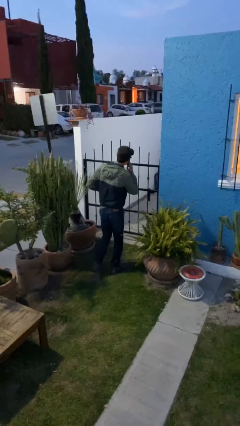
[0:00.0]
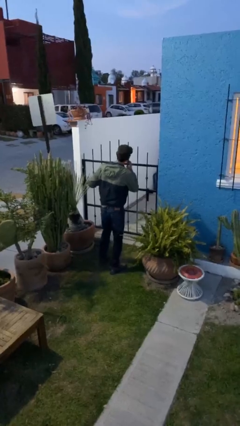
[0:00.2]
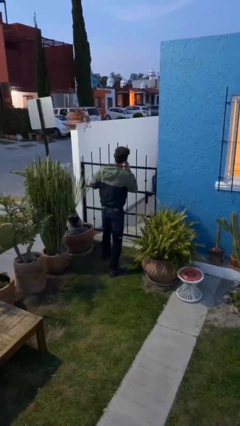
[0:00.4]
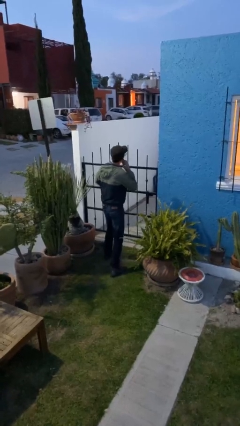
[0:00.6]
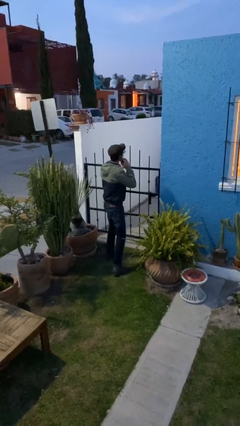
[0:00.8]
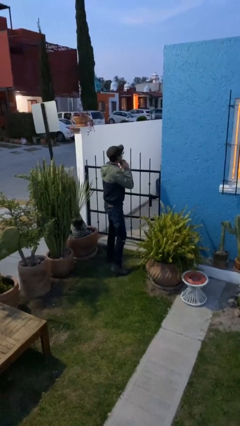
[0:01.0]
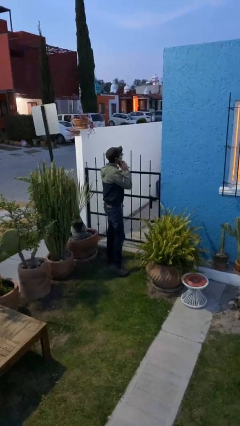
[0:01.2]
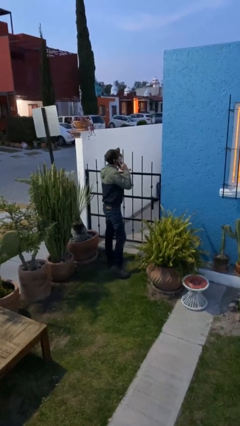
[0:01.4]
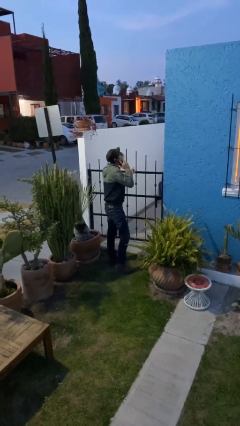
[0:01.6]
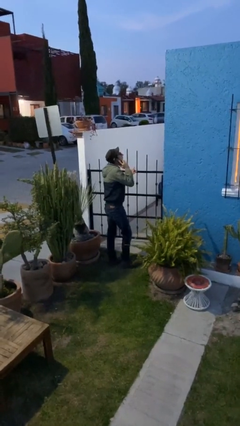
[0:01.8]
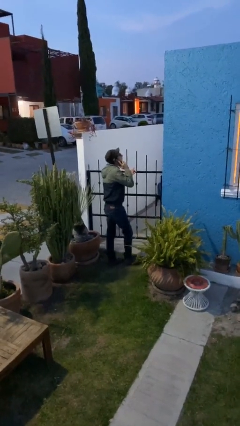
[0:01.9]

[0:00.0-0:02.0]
person opens facility door

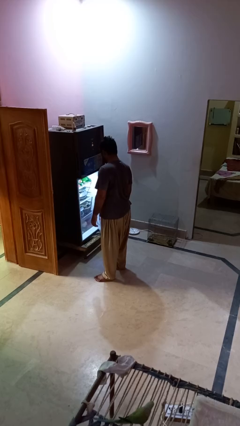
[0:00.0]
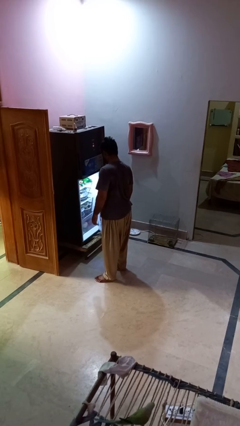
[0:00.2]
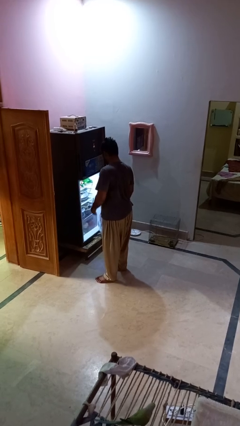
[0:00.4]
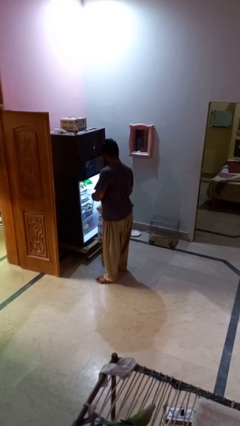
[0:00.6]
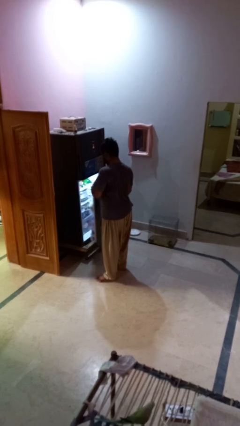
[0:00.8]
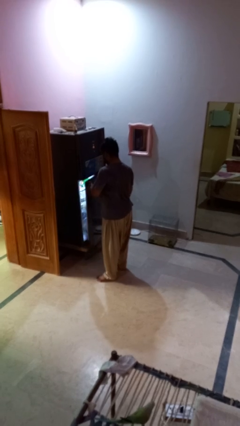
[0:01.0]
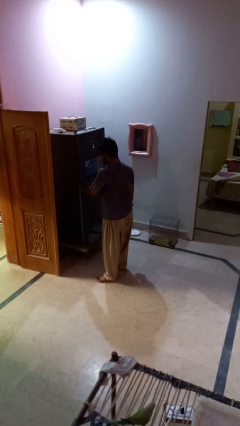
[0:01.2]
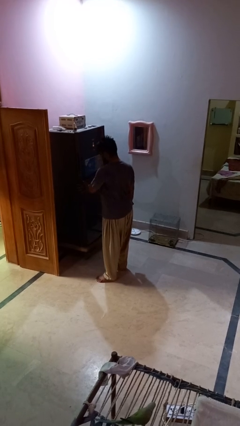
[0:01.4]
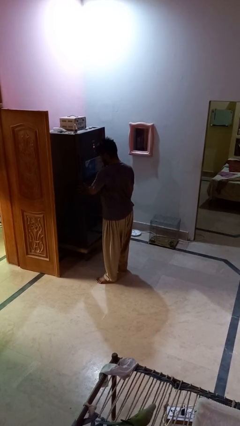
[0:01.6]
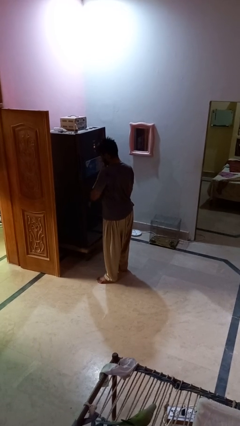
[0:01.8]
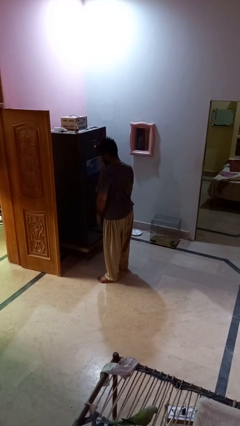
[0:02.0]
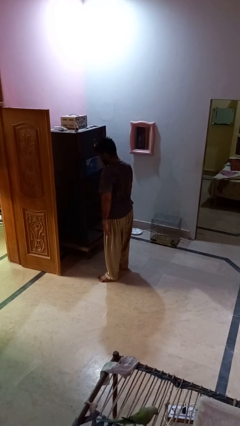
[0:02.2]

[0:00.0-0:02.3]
person closes refrigerator

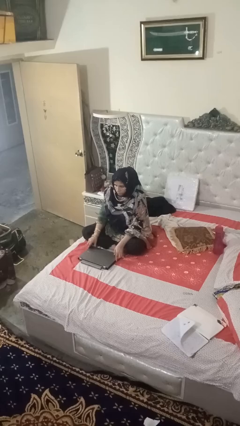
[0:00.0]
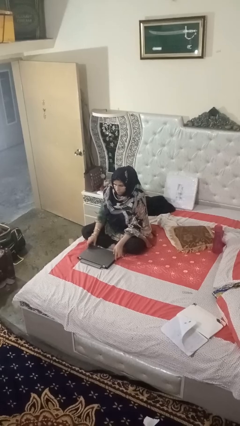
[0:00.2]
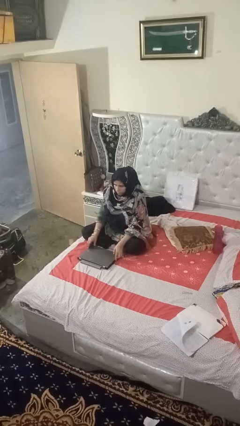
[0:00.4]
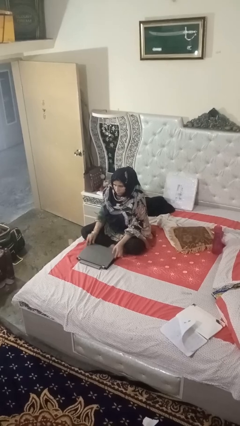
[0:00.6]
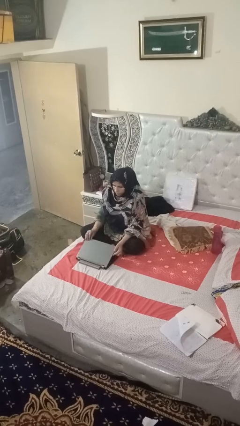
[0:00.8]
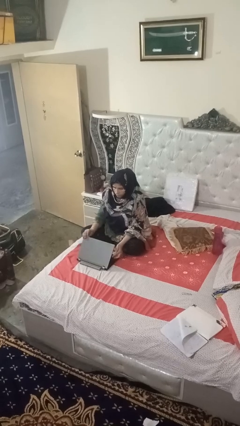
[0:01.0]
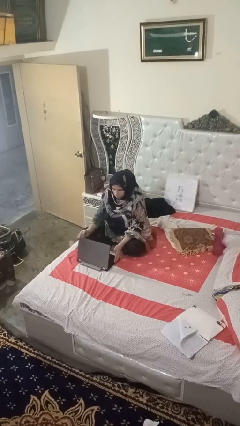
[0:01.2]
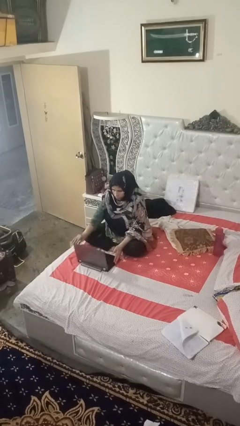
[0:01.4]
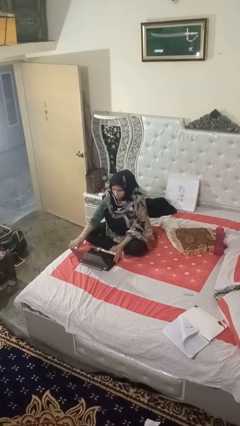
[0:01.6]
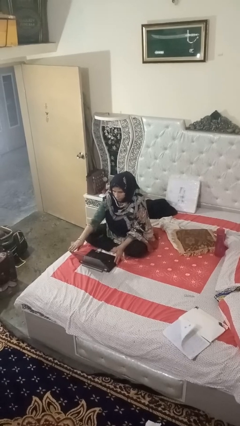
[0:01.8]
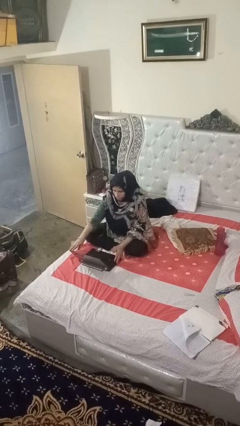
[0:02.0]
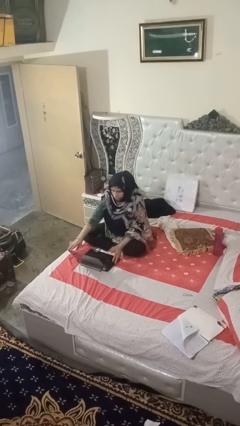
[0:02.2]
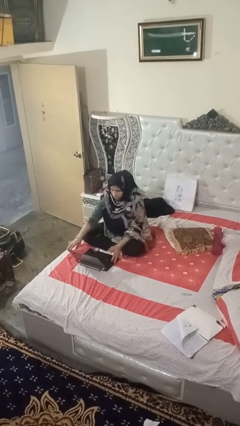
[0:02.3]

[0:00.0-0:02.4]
person opens laptop

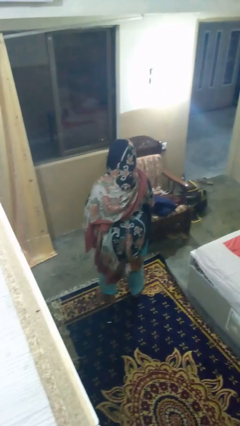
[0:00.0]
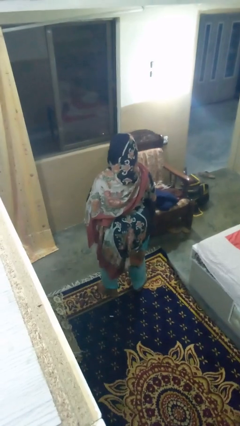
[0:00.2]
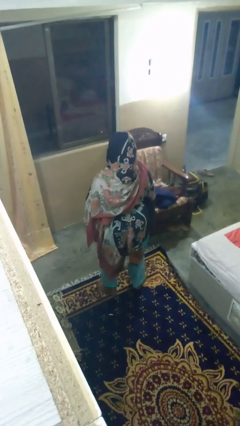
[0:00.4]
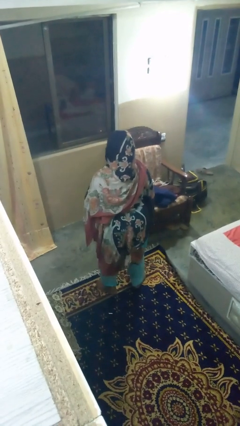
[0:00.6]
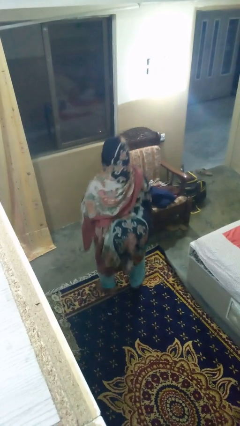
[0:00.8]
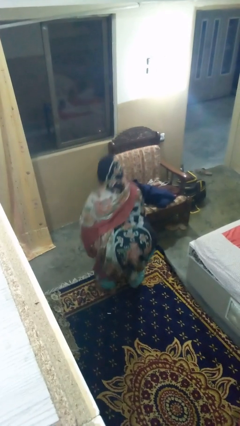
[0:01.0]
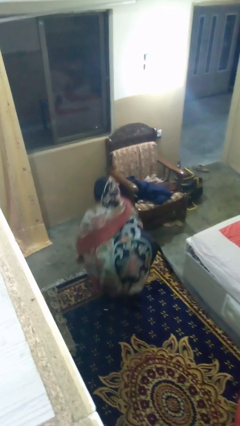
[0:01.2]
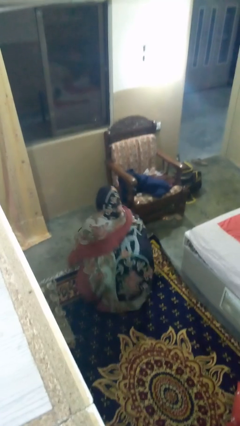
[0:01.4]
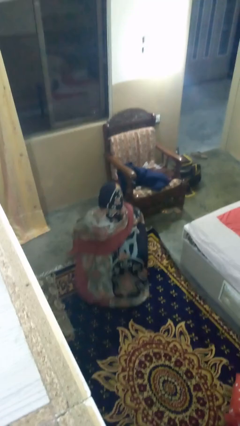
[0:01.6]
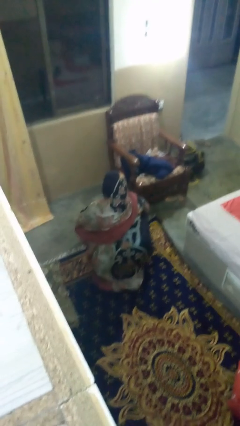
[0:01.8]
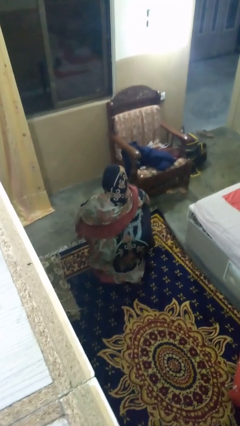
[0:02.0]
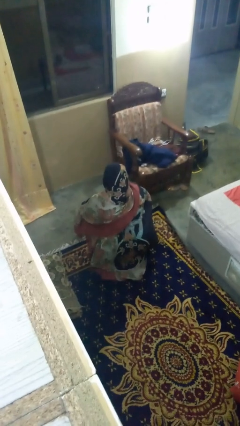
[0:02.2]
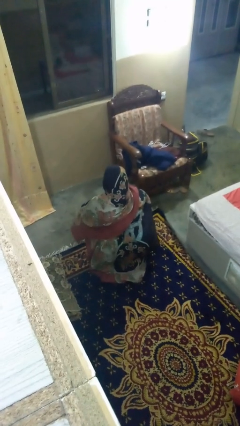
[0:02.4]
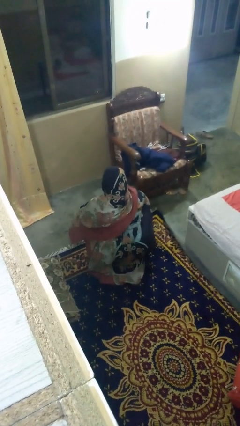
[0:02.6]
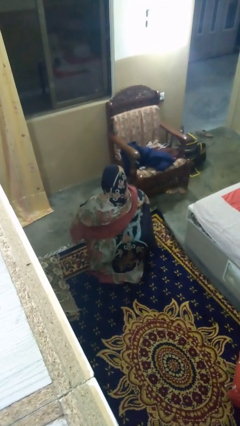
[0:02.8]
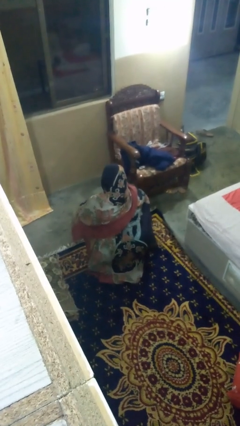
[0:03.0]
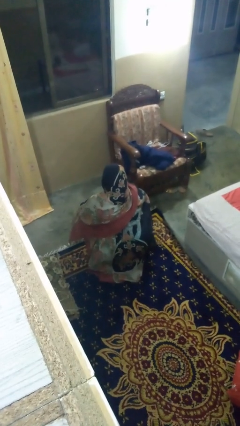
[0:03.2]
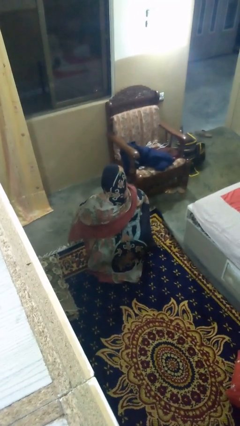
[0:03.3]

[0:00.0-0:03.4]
person squats

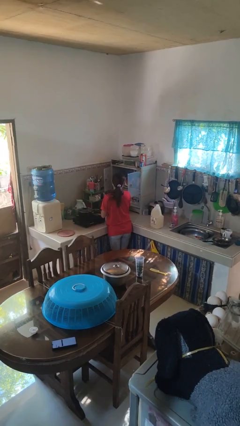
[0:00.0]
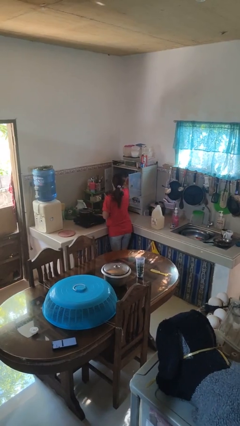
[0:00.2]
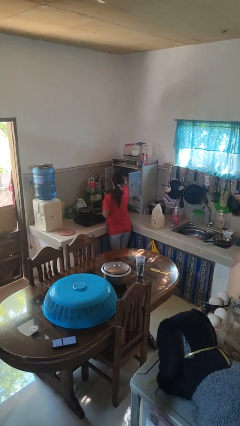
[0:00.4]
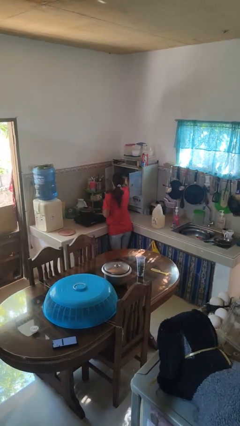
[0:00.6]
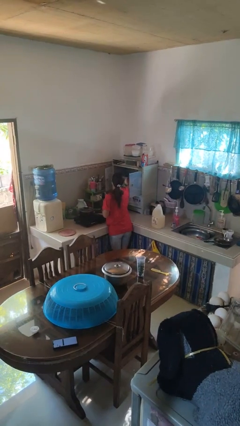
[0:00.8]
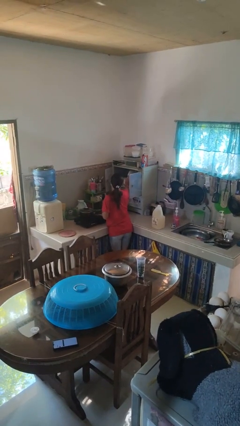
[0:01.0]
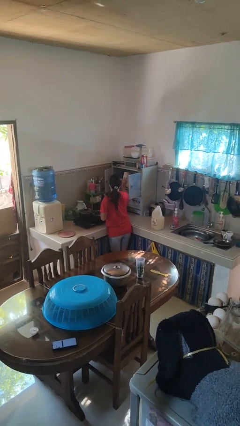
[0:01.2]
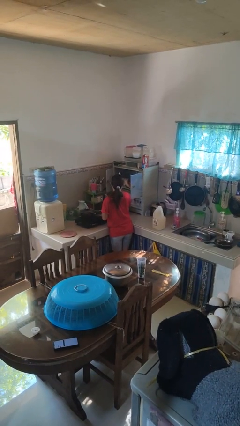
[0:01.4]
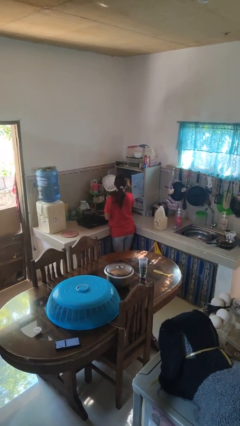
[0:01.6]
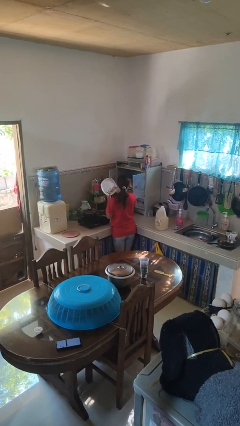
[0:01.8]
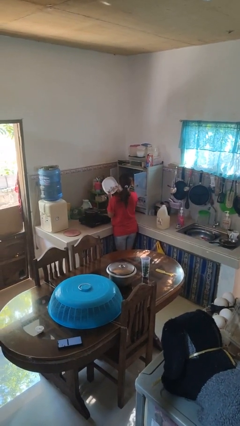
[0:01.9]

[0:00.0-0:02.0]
person takes object from cabinet

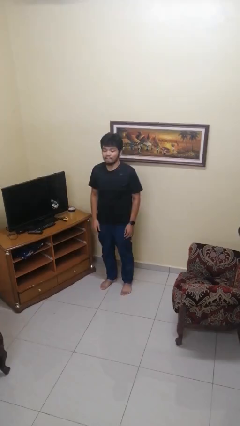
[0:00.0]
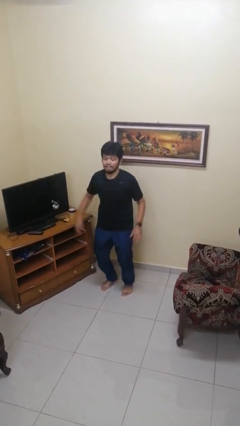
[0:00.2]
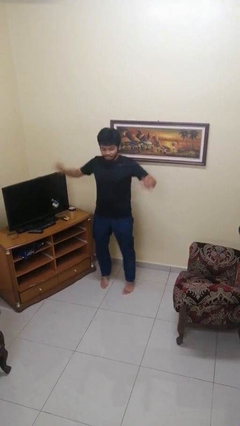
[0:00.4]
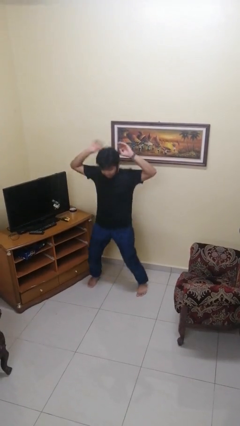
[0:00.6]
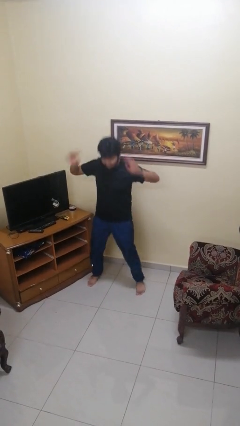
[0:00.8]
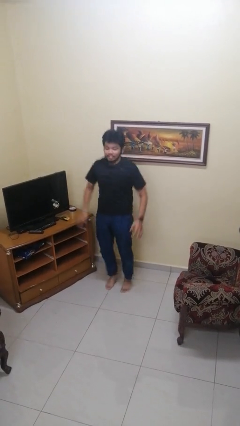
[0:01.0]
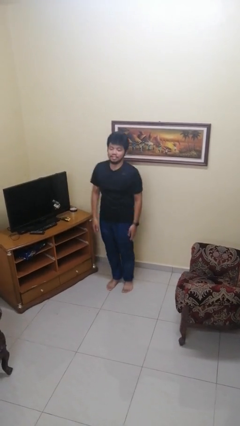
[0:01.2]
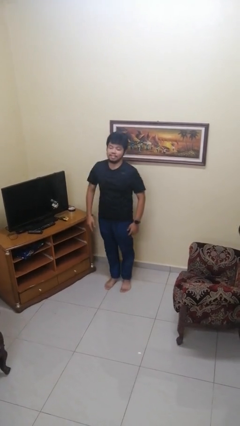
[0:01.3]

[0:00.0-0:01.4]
person exercises with jumping jacks

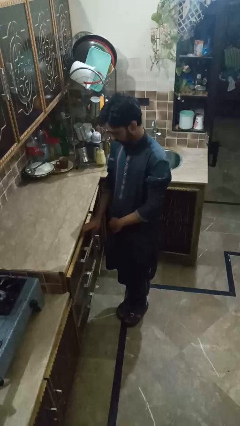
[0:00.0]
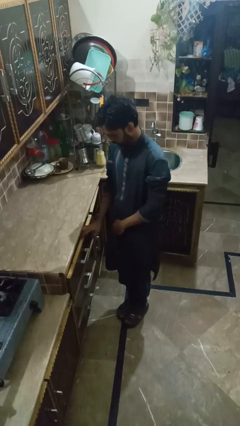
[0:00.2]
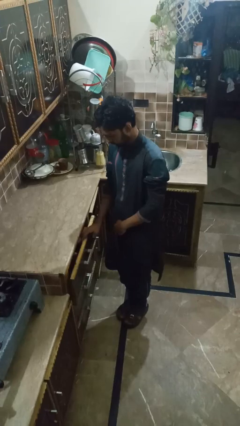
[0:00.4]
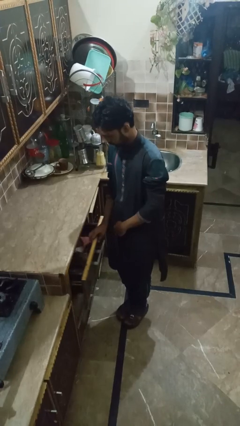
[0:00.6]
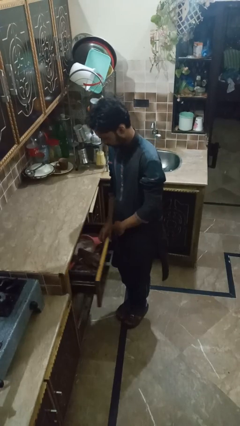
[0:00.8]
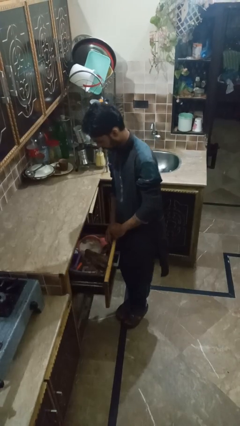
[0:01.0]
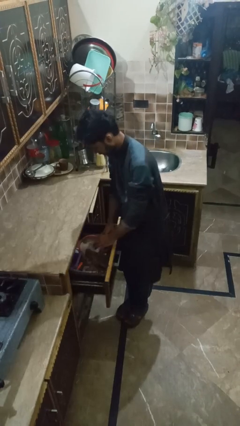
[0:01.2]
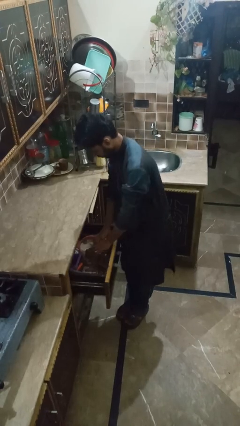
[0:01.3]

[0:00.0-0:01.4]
person searches in kitchen drawer

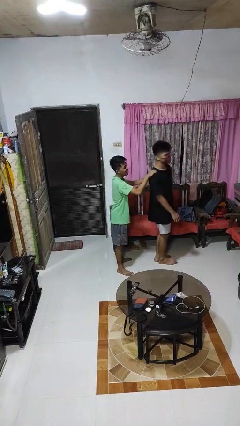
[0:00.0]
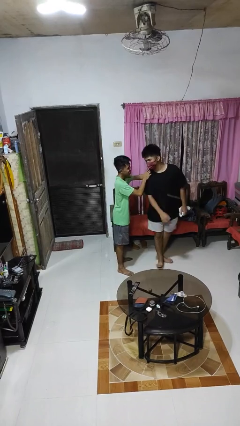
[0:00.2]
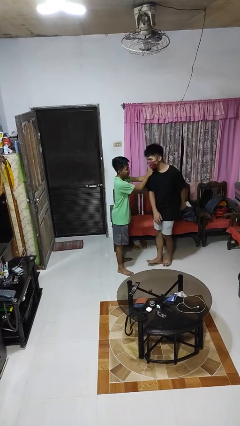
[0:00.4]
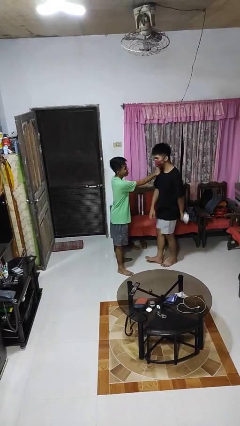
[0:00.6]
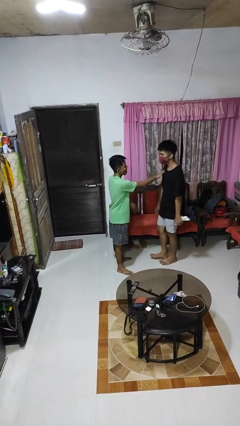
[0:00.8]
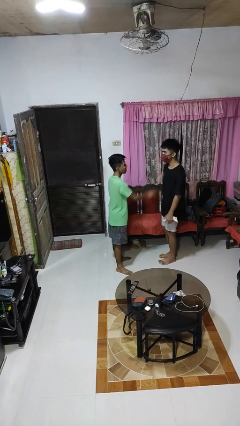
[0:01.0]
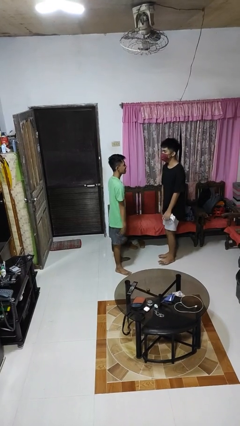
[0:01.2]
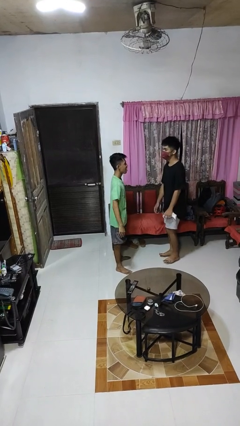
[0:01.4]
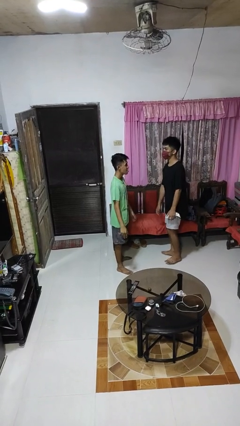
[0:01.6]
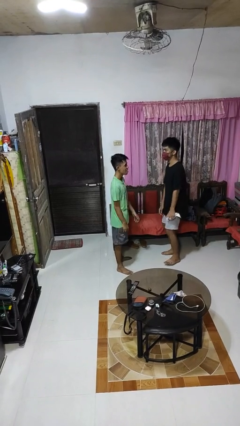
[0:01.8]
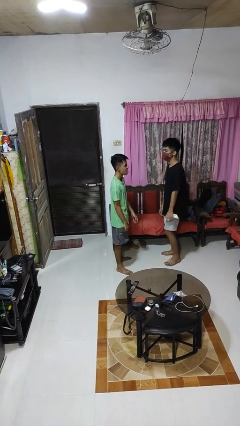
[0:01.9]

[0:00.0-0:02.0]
person spins person around

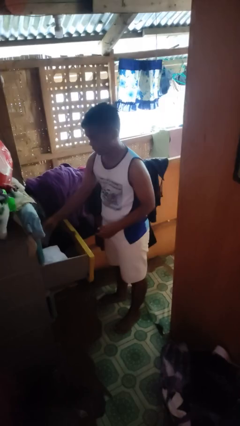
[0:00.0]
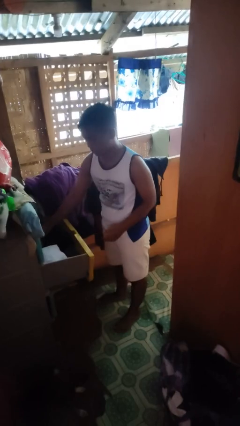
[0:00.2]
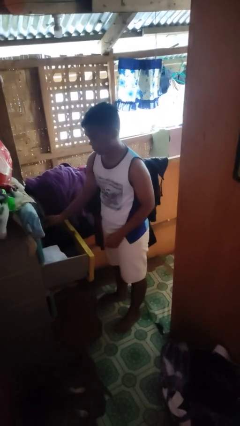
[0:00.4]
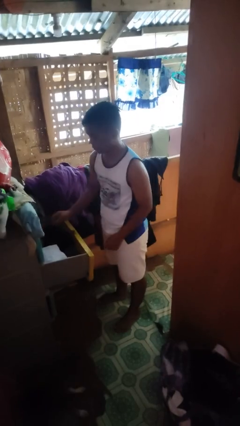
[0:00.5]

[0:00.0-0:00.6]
person puts clothes into dresser
